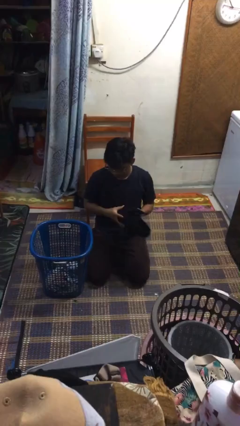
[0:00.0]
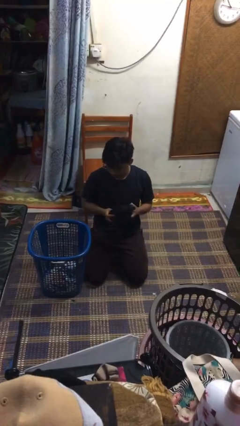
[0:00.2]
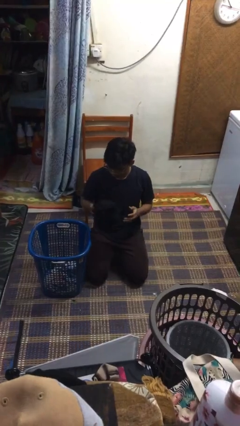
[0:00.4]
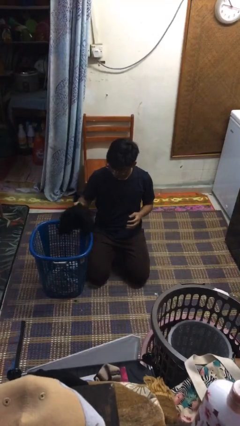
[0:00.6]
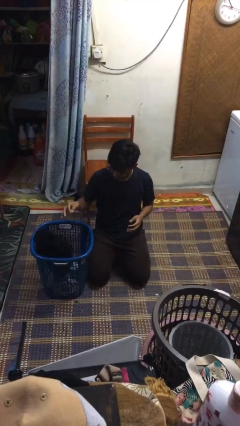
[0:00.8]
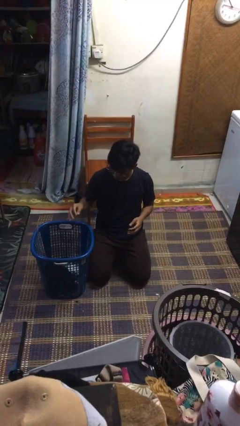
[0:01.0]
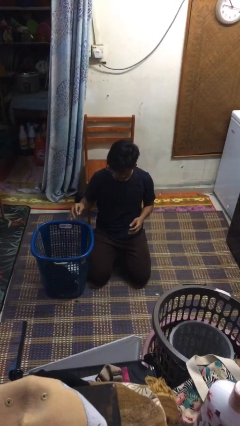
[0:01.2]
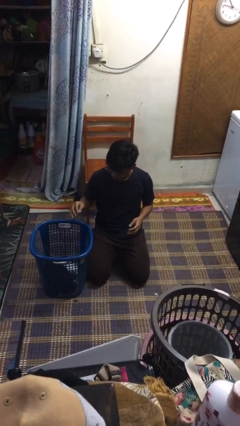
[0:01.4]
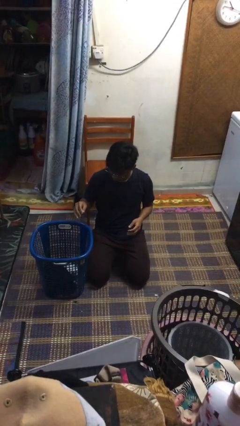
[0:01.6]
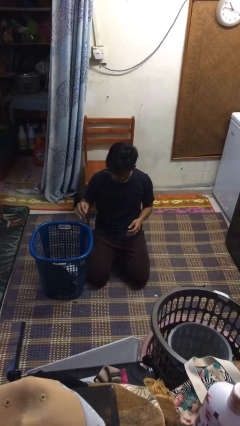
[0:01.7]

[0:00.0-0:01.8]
person puts object into basket

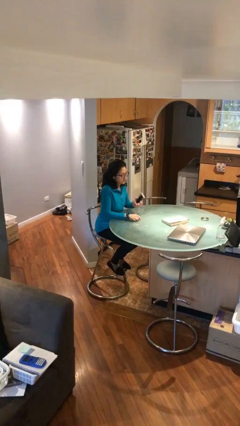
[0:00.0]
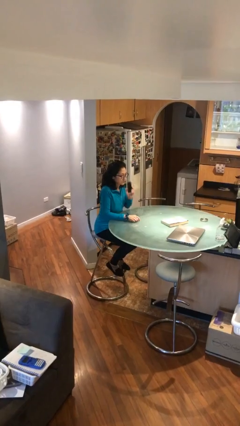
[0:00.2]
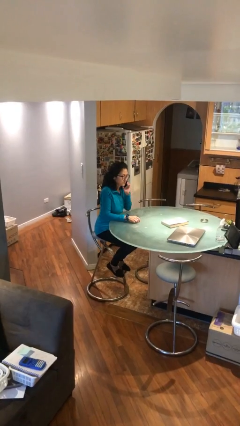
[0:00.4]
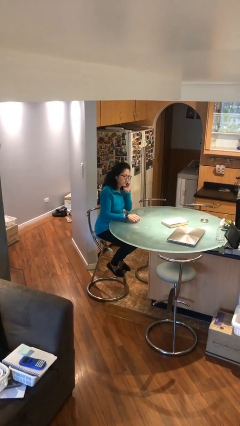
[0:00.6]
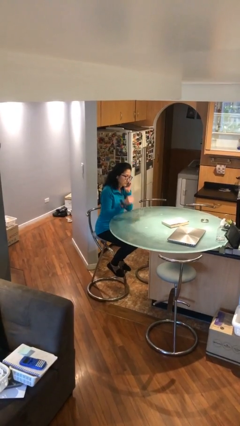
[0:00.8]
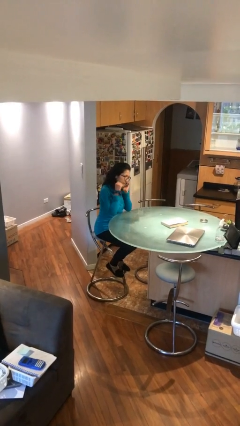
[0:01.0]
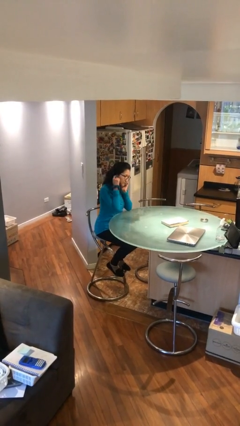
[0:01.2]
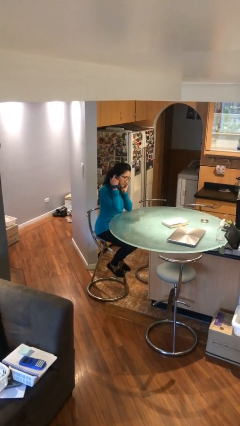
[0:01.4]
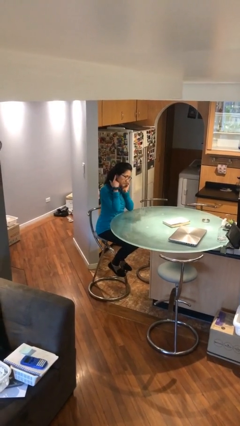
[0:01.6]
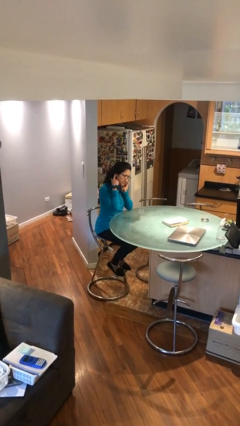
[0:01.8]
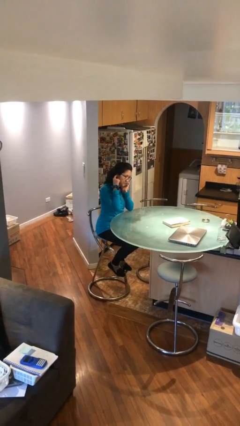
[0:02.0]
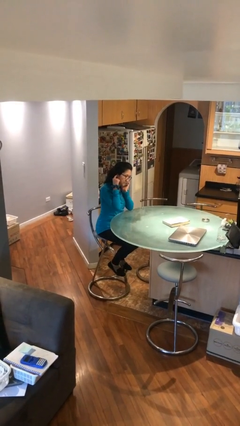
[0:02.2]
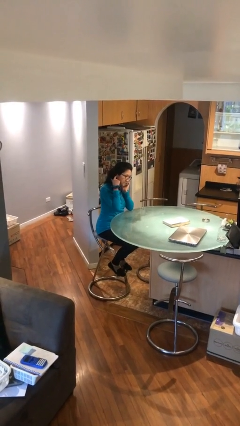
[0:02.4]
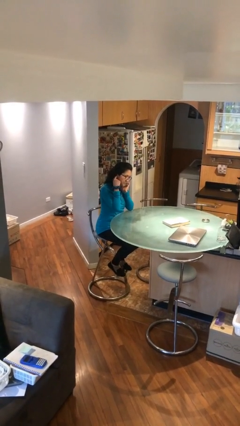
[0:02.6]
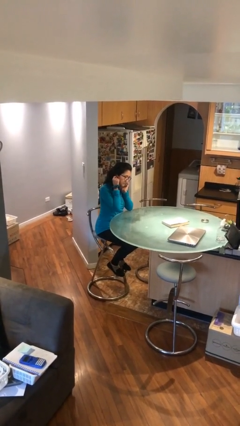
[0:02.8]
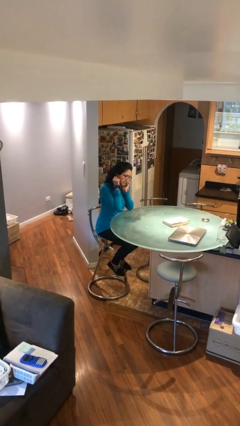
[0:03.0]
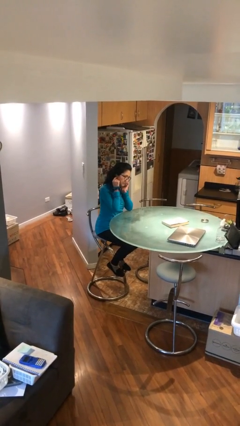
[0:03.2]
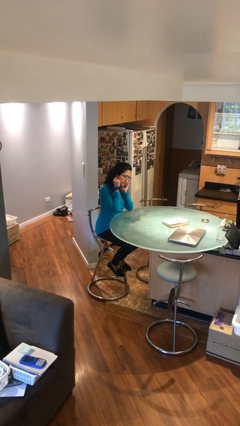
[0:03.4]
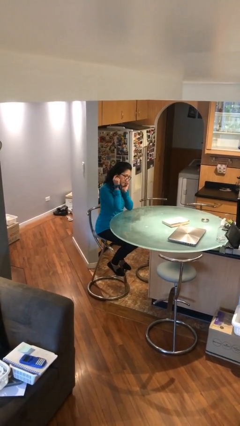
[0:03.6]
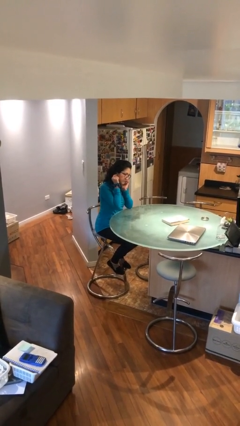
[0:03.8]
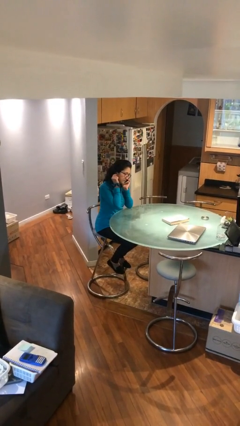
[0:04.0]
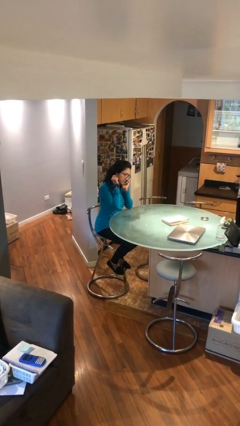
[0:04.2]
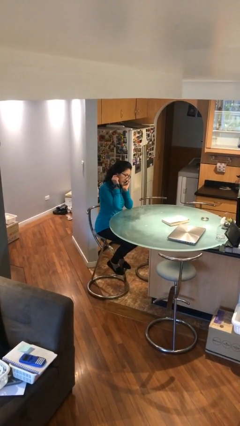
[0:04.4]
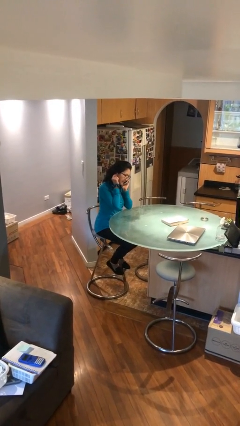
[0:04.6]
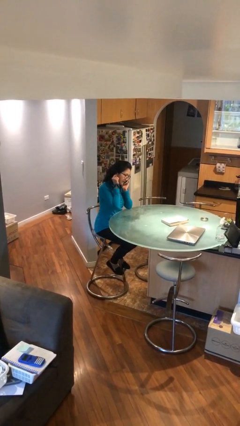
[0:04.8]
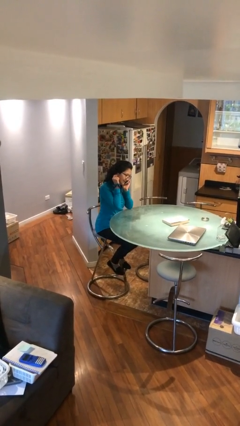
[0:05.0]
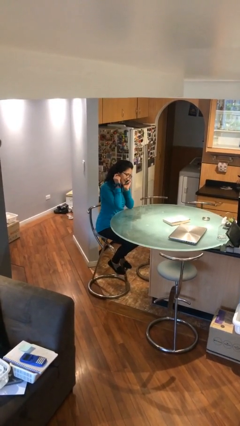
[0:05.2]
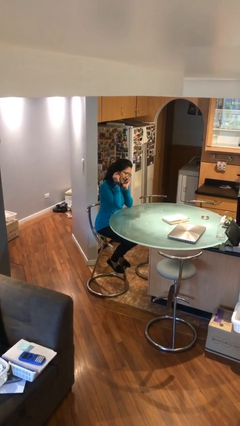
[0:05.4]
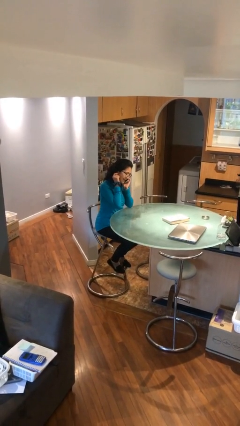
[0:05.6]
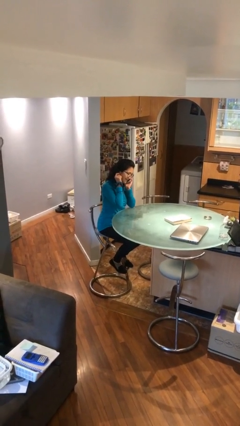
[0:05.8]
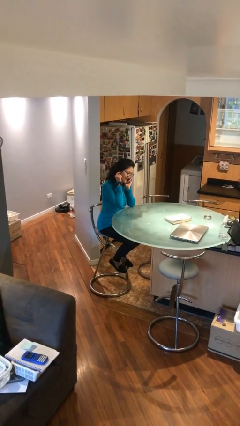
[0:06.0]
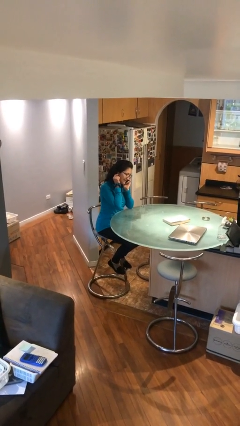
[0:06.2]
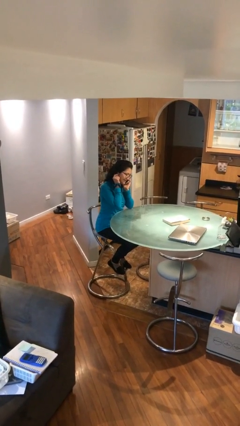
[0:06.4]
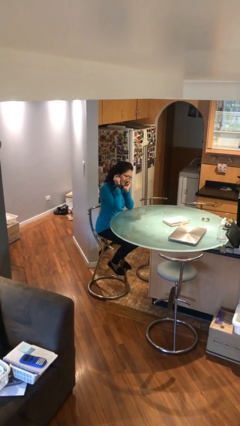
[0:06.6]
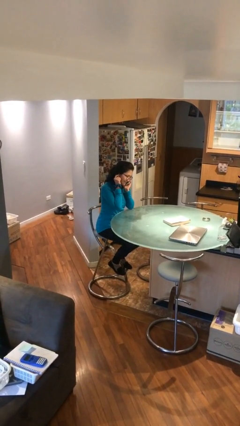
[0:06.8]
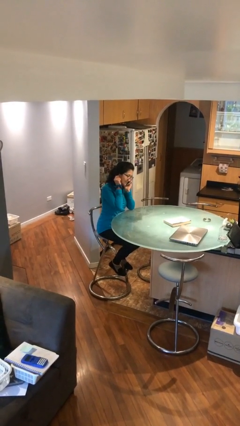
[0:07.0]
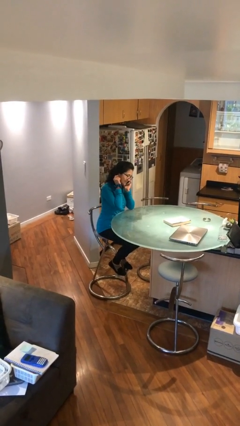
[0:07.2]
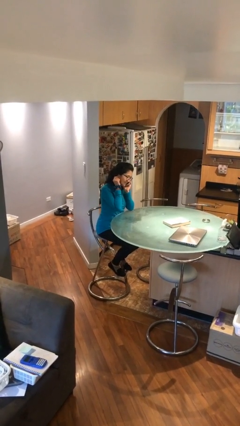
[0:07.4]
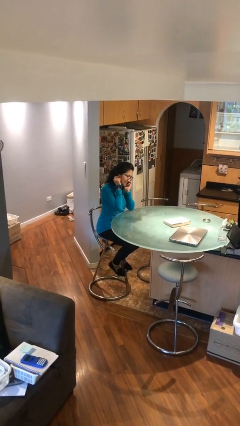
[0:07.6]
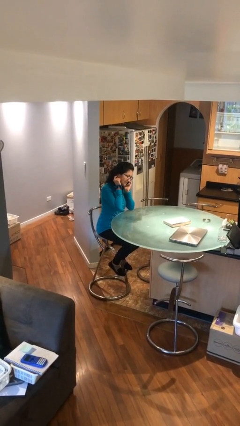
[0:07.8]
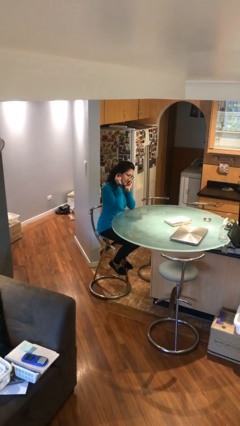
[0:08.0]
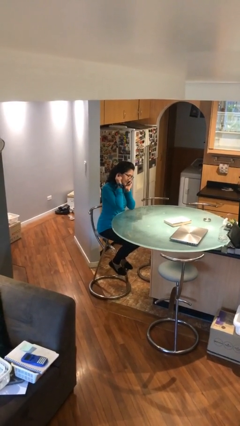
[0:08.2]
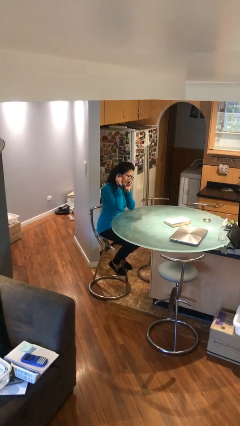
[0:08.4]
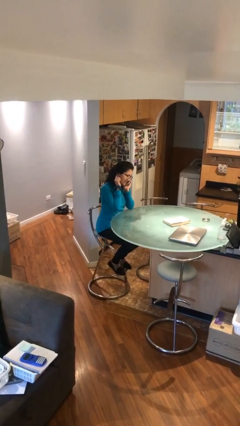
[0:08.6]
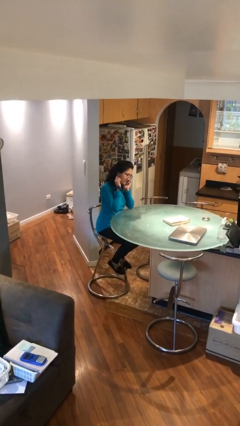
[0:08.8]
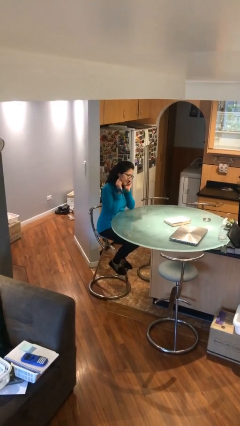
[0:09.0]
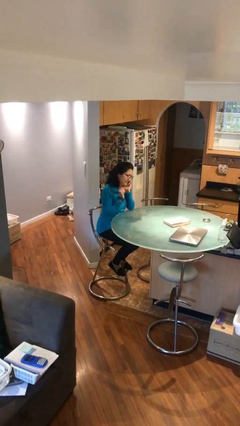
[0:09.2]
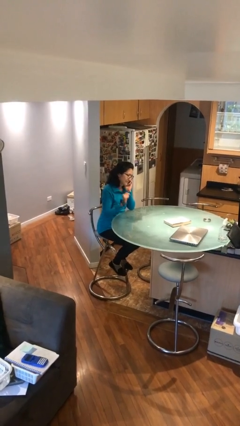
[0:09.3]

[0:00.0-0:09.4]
person talks on phone

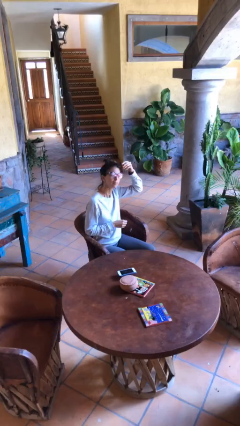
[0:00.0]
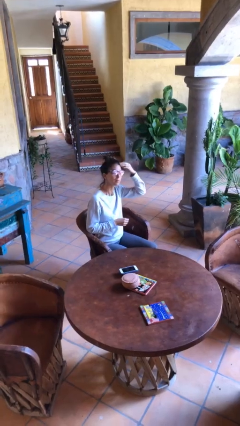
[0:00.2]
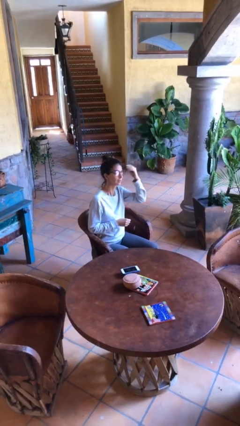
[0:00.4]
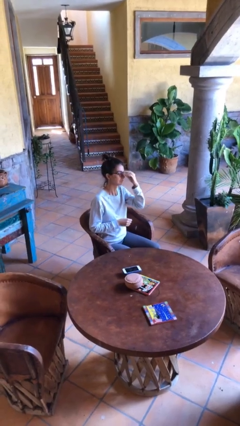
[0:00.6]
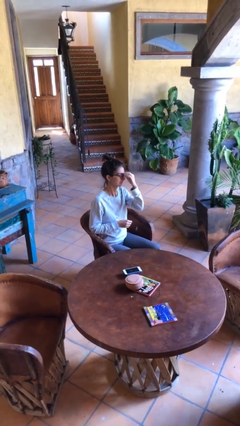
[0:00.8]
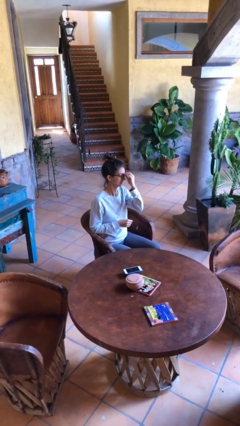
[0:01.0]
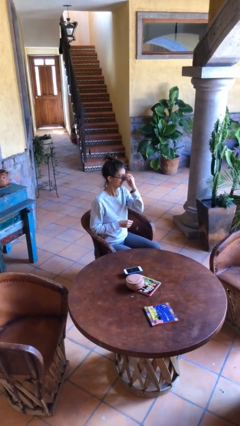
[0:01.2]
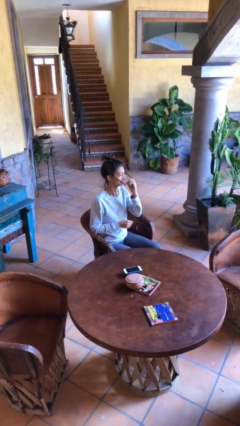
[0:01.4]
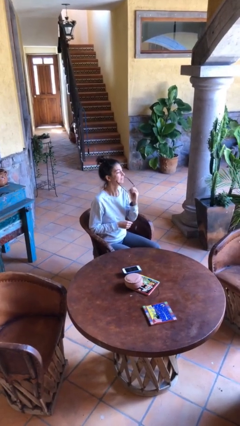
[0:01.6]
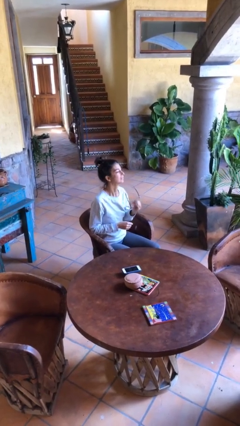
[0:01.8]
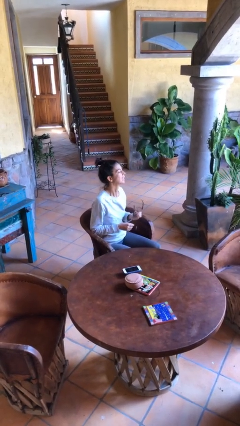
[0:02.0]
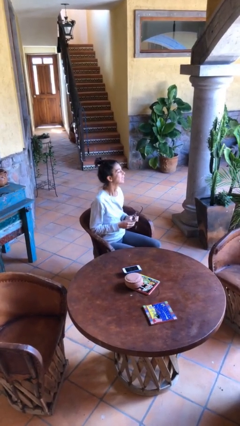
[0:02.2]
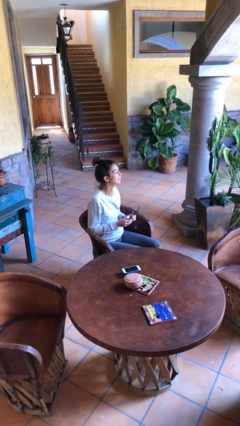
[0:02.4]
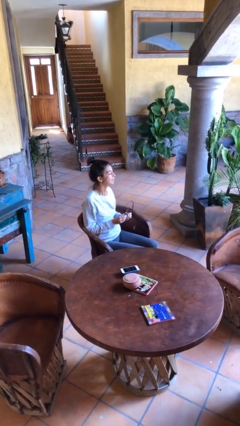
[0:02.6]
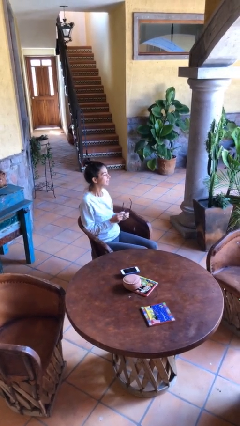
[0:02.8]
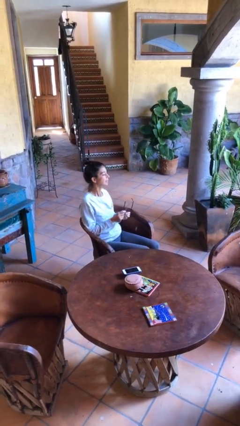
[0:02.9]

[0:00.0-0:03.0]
person takes off glasses

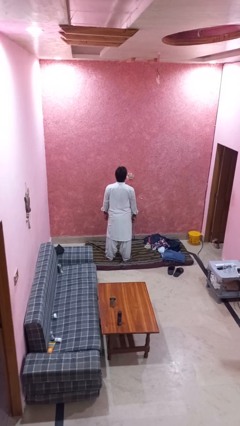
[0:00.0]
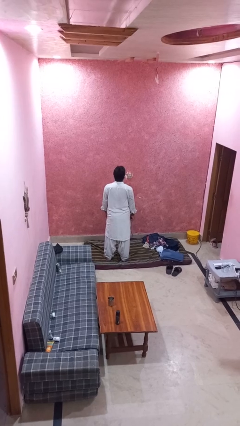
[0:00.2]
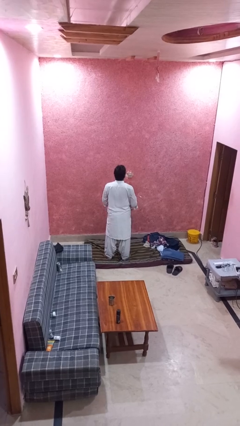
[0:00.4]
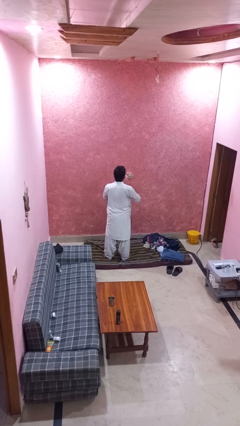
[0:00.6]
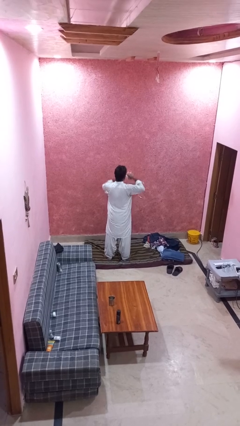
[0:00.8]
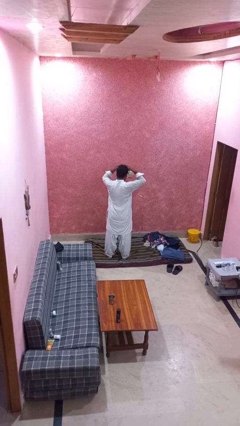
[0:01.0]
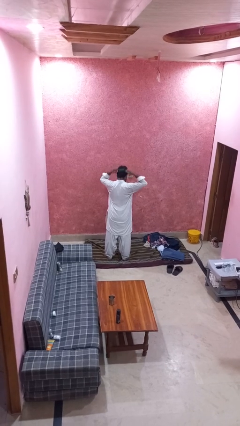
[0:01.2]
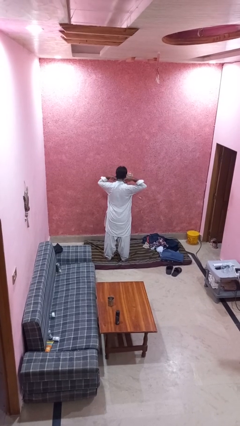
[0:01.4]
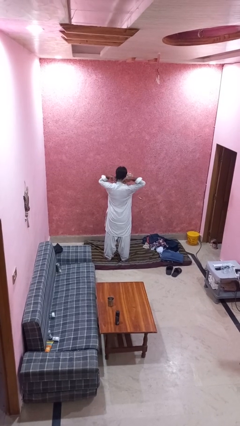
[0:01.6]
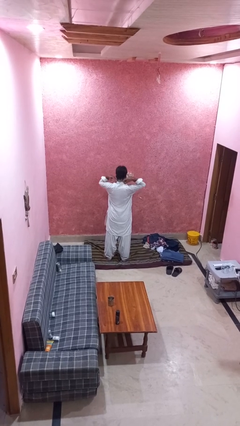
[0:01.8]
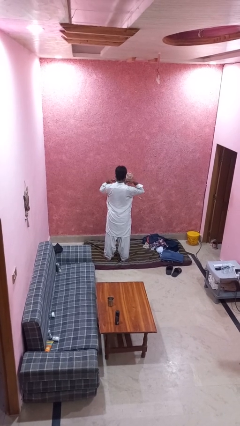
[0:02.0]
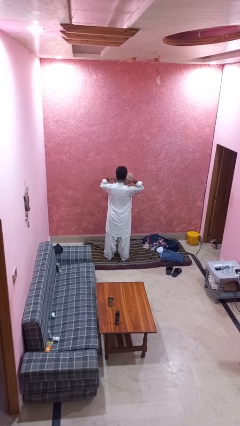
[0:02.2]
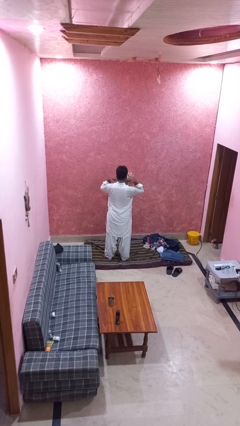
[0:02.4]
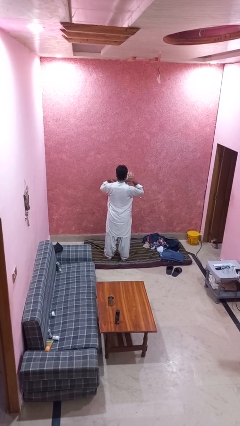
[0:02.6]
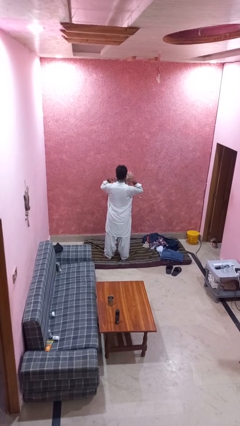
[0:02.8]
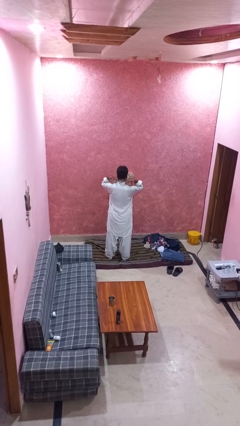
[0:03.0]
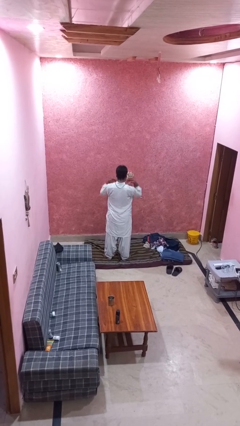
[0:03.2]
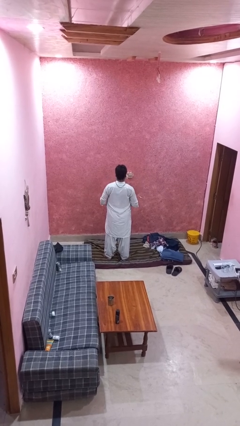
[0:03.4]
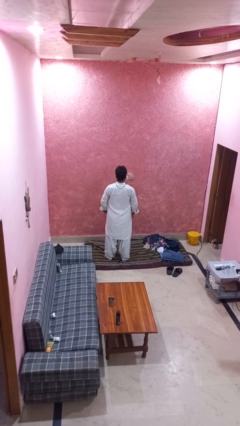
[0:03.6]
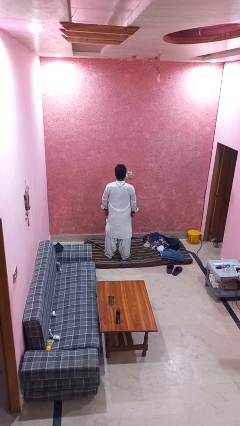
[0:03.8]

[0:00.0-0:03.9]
person puts on necklace
